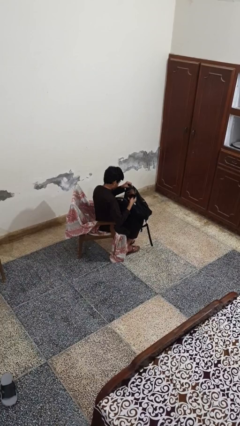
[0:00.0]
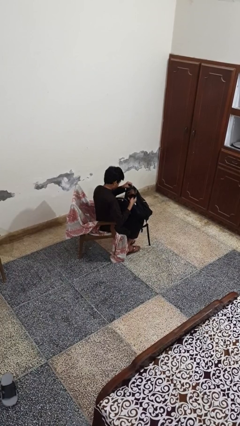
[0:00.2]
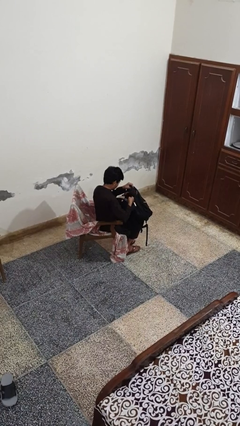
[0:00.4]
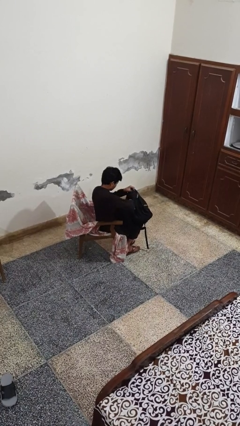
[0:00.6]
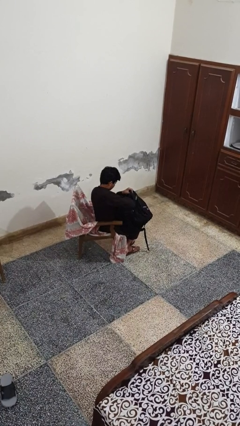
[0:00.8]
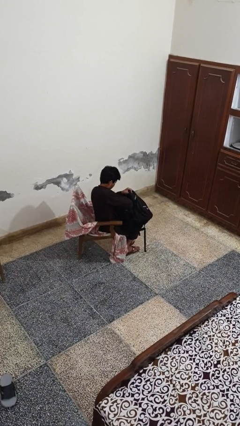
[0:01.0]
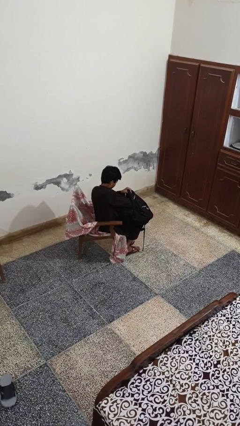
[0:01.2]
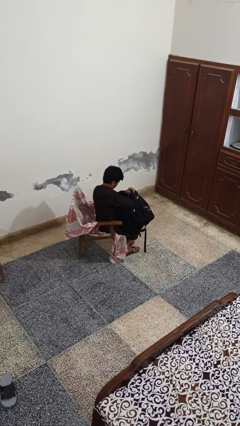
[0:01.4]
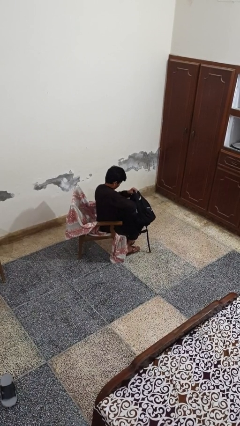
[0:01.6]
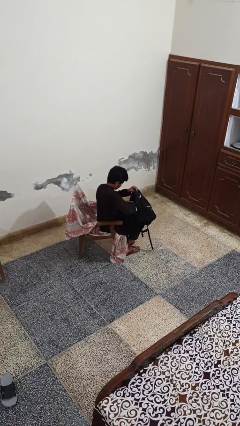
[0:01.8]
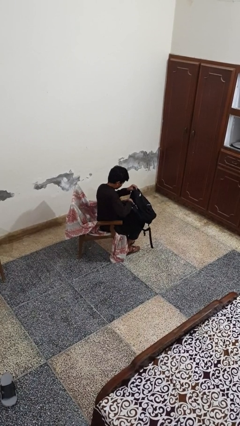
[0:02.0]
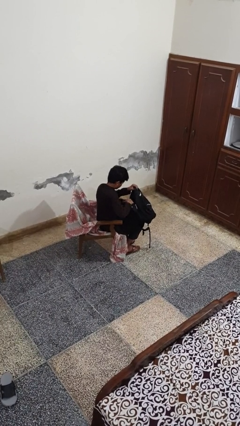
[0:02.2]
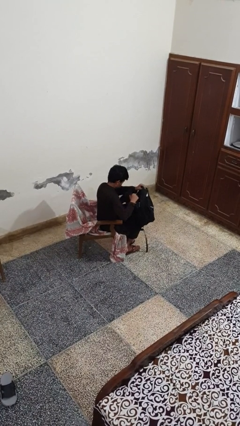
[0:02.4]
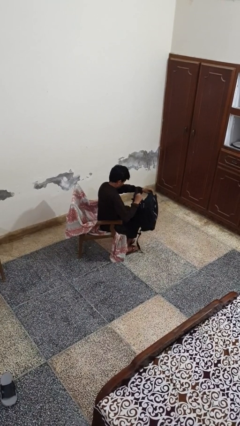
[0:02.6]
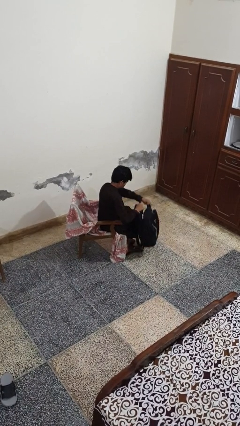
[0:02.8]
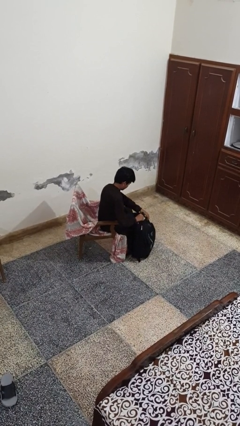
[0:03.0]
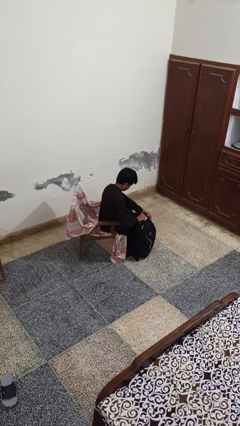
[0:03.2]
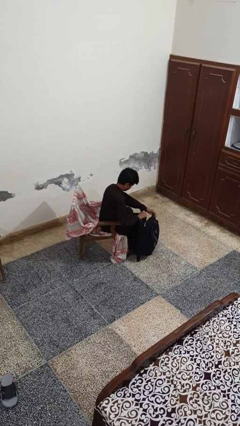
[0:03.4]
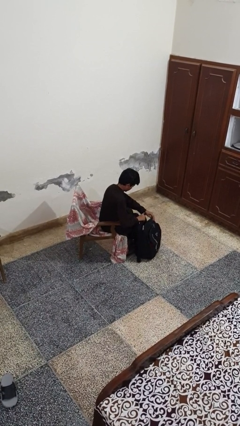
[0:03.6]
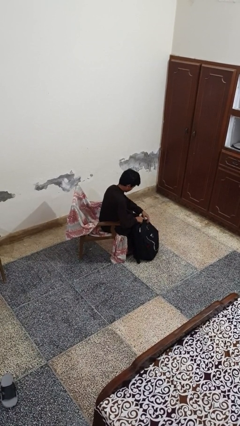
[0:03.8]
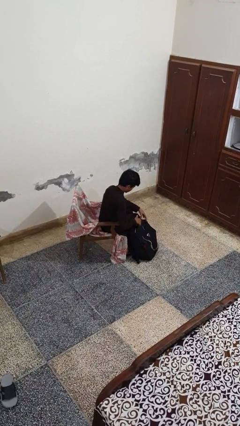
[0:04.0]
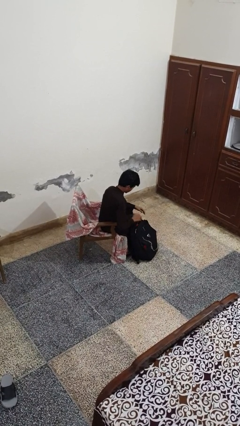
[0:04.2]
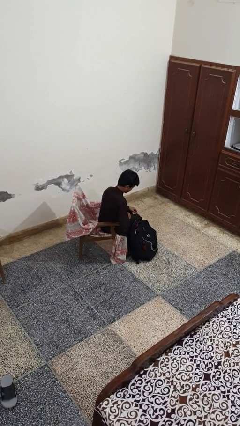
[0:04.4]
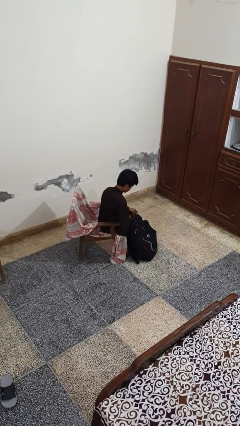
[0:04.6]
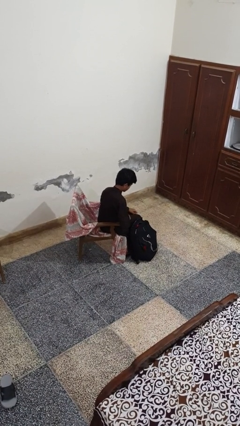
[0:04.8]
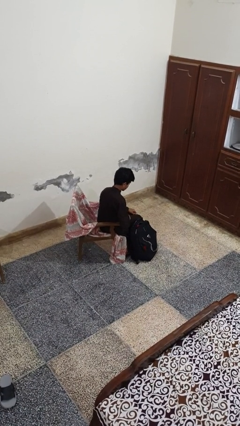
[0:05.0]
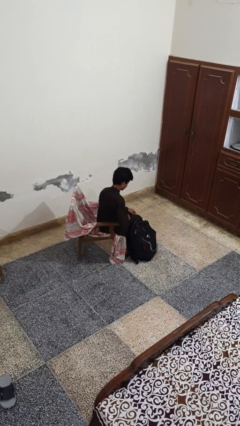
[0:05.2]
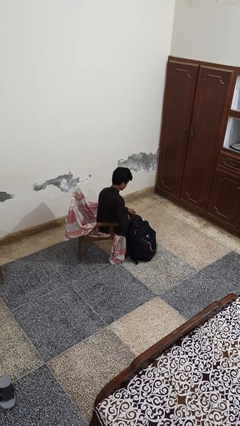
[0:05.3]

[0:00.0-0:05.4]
person puts object into backpack

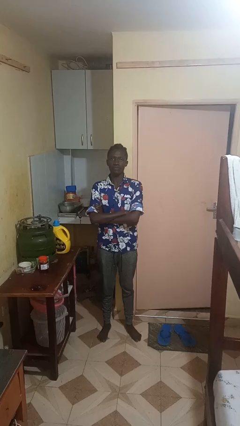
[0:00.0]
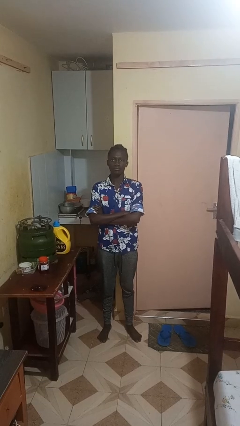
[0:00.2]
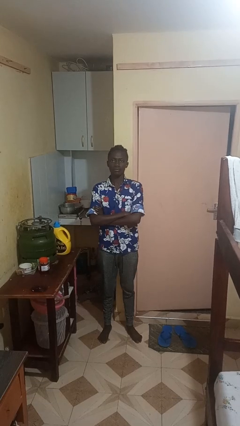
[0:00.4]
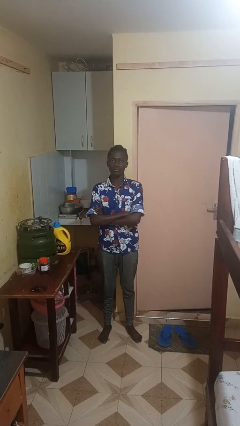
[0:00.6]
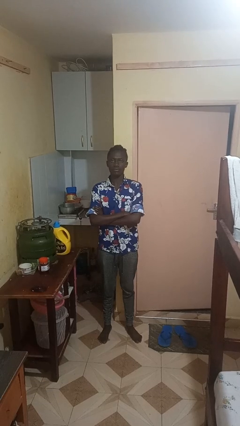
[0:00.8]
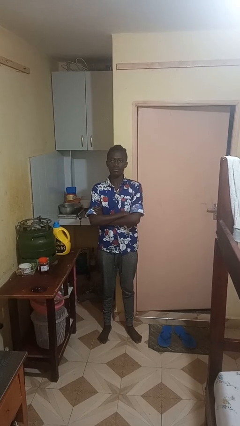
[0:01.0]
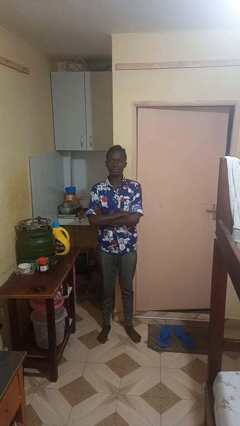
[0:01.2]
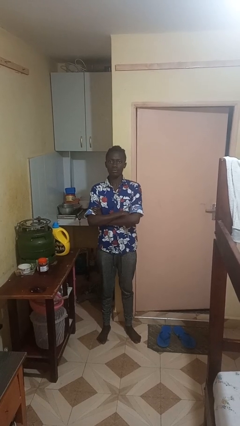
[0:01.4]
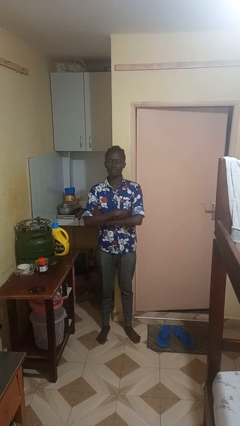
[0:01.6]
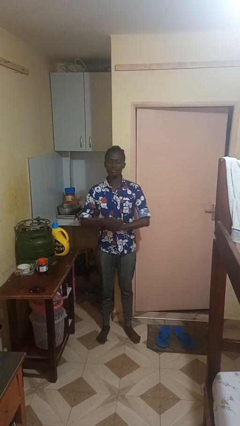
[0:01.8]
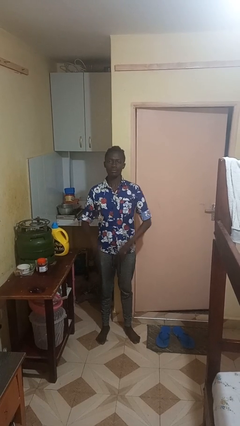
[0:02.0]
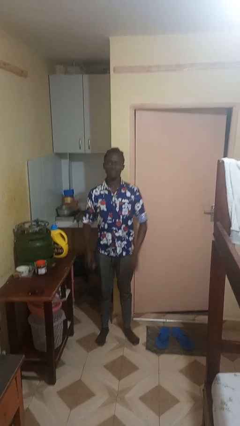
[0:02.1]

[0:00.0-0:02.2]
person crosses arms

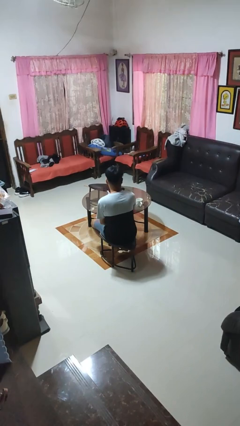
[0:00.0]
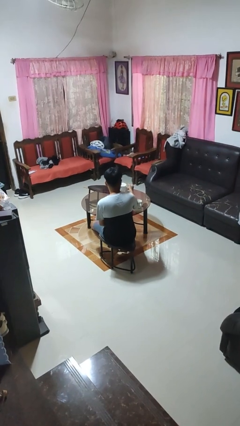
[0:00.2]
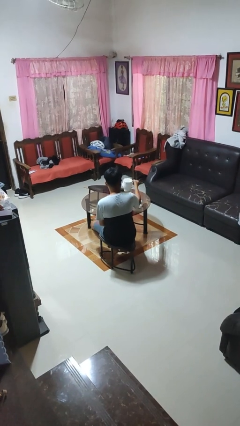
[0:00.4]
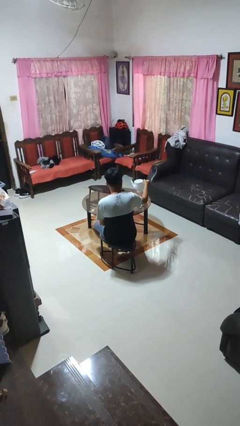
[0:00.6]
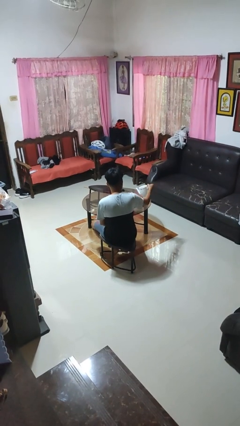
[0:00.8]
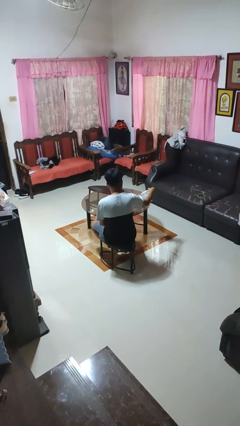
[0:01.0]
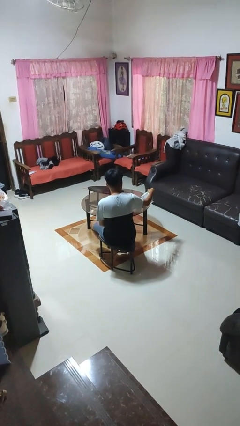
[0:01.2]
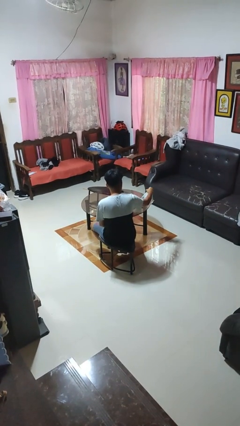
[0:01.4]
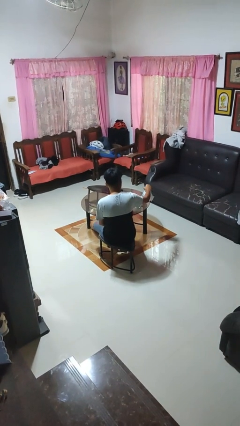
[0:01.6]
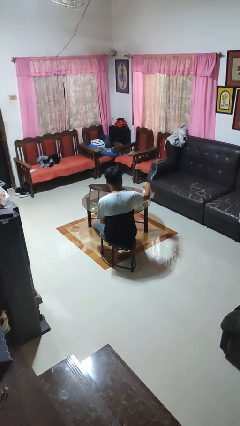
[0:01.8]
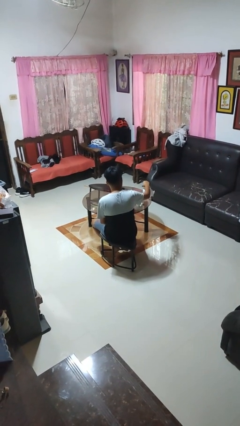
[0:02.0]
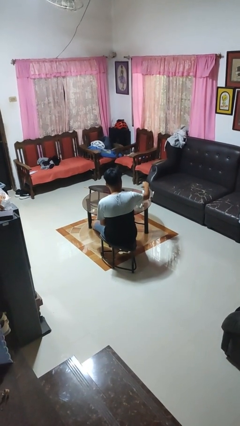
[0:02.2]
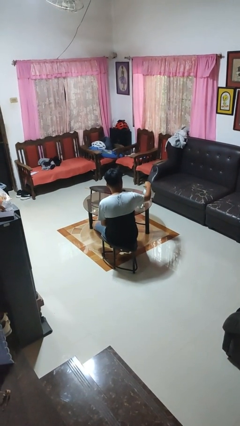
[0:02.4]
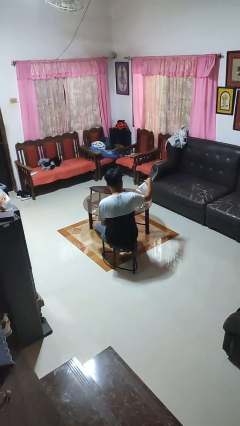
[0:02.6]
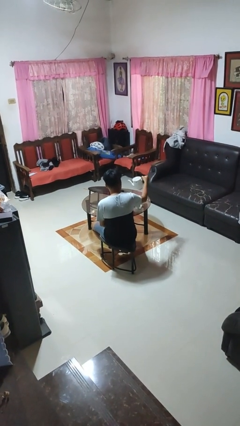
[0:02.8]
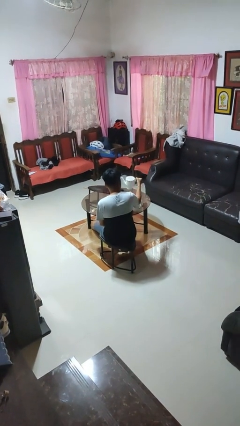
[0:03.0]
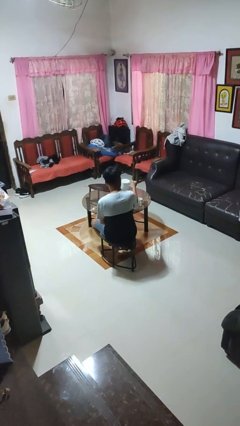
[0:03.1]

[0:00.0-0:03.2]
person pours coffee into mug

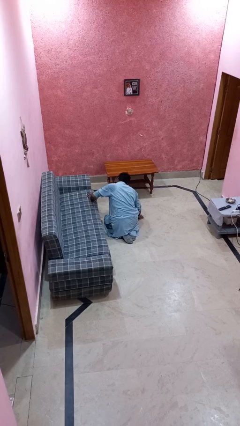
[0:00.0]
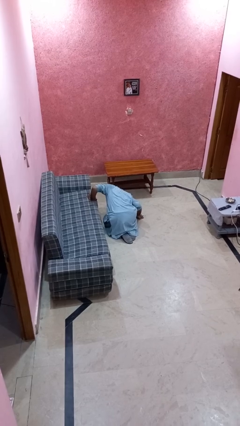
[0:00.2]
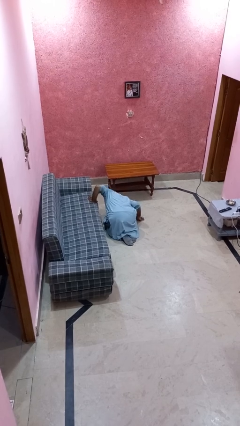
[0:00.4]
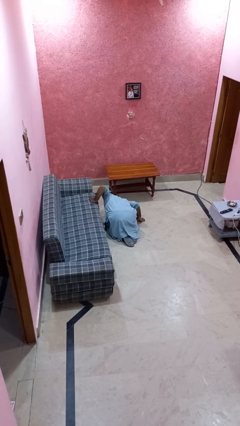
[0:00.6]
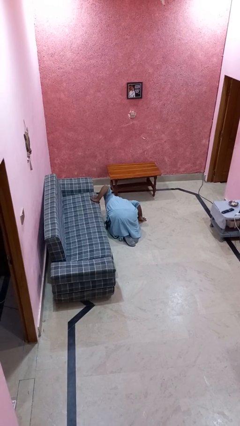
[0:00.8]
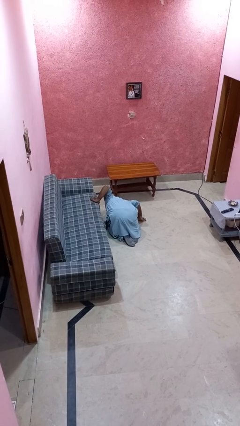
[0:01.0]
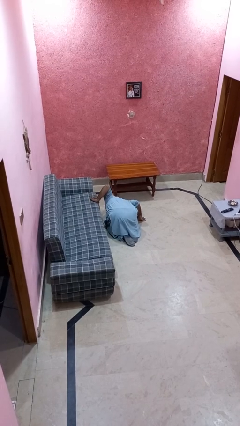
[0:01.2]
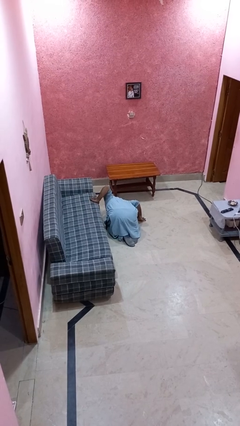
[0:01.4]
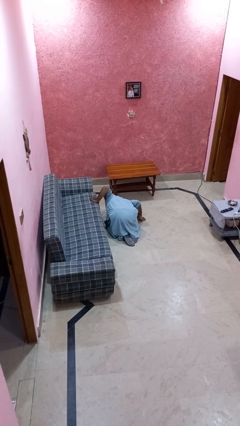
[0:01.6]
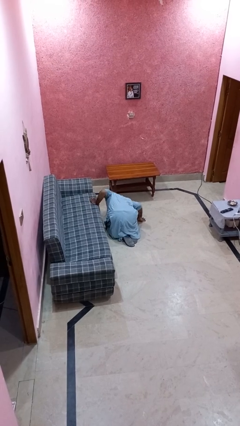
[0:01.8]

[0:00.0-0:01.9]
person searches under couch

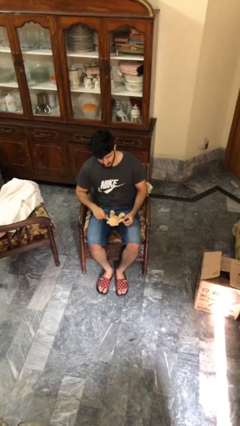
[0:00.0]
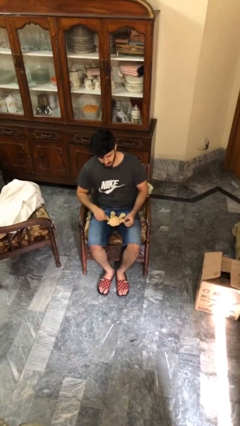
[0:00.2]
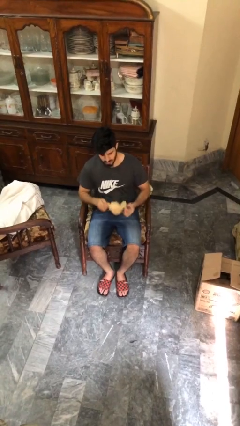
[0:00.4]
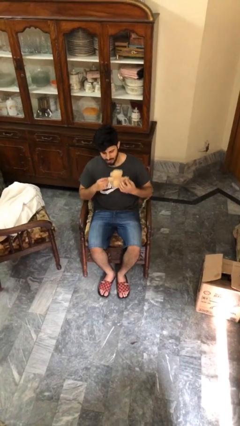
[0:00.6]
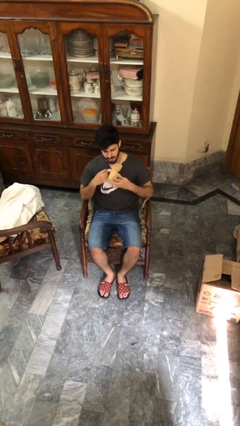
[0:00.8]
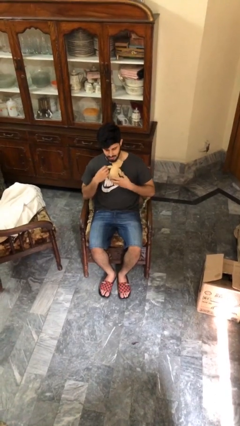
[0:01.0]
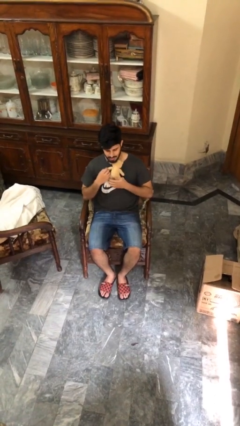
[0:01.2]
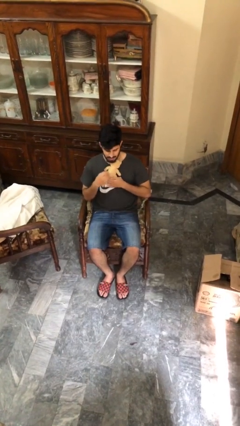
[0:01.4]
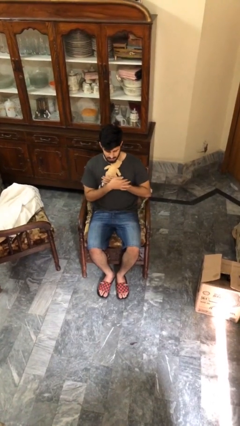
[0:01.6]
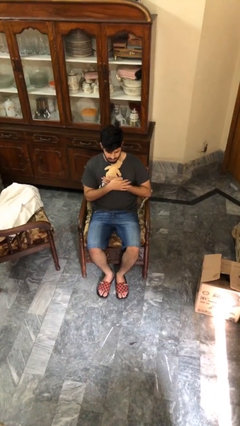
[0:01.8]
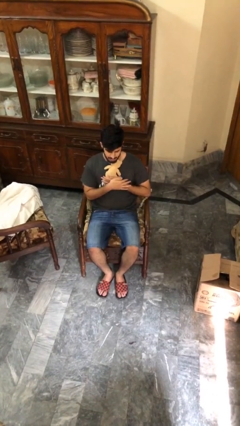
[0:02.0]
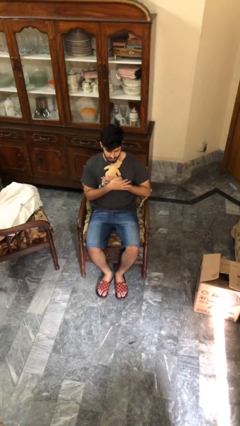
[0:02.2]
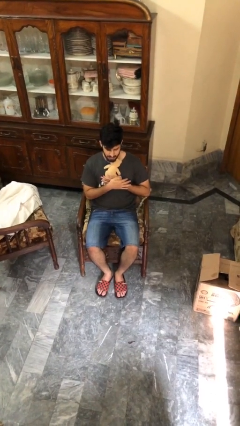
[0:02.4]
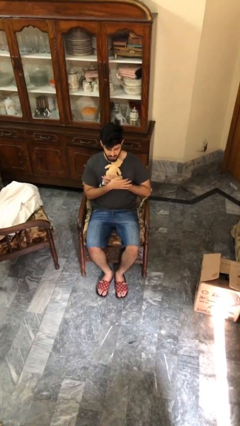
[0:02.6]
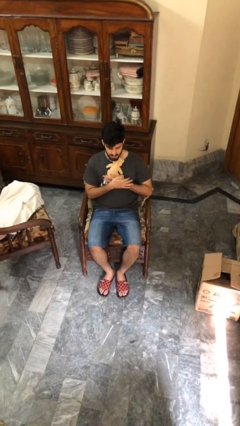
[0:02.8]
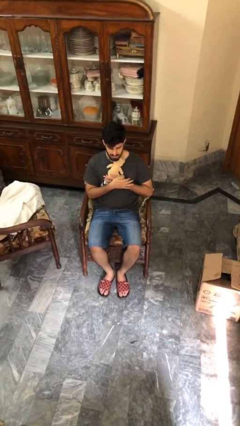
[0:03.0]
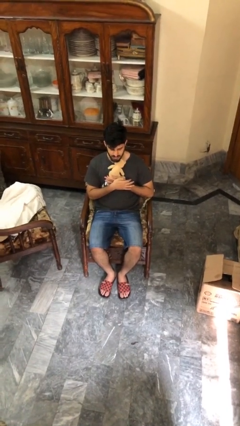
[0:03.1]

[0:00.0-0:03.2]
person hugs stuffed animal

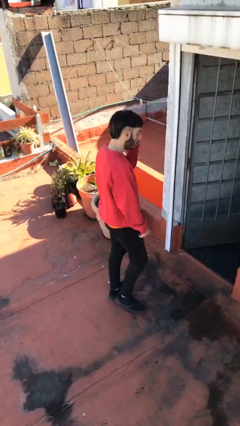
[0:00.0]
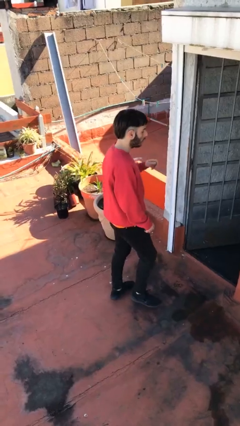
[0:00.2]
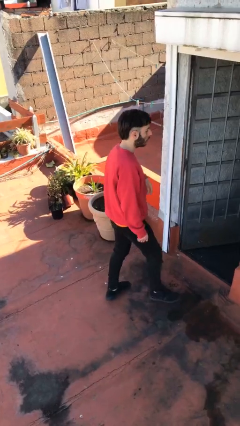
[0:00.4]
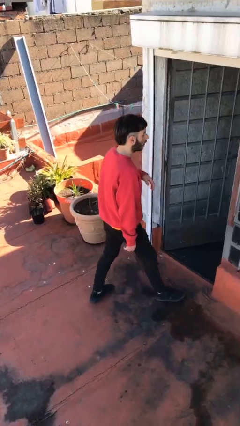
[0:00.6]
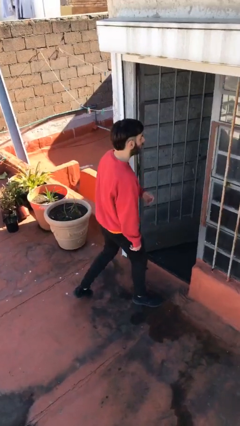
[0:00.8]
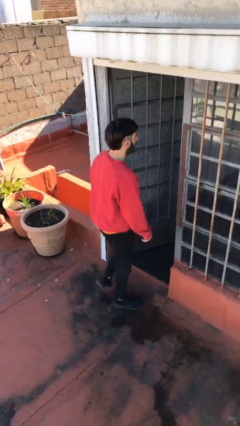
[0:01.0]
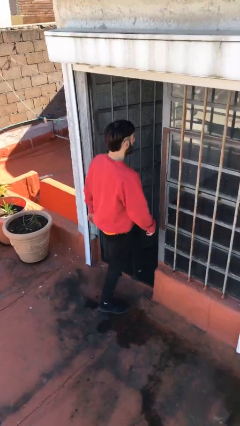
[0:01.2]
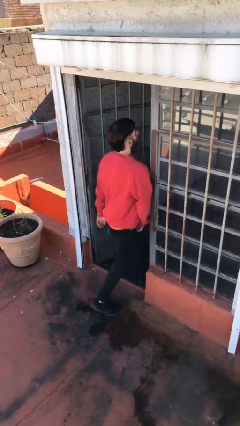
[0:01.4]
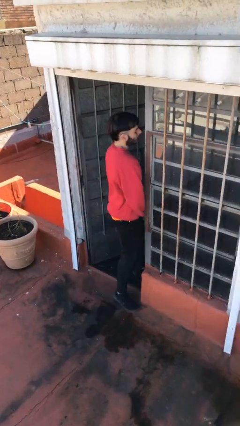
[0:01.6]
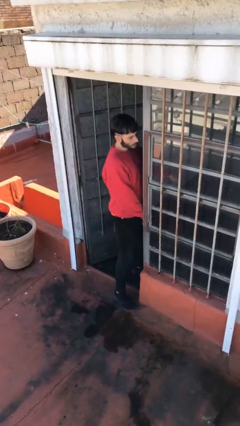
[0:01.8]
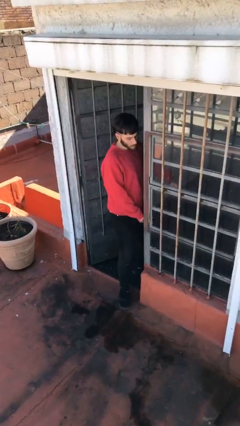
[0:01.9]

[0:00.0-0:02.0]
person bumps into wall
